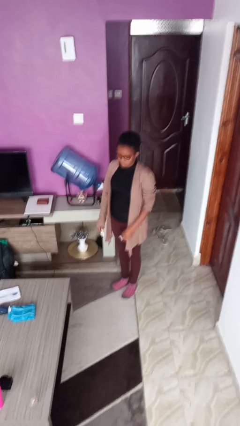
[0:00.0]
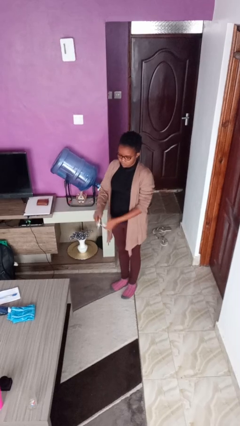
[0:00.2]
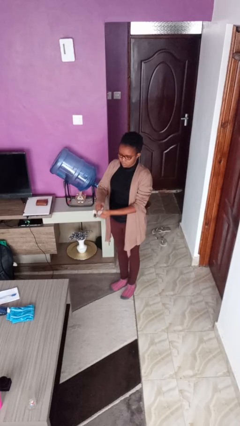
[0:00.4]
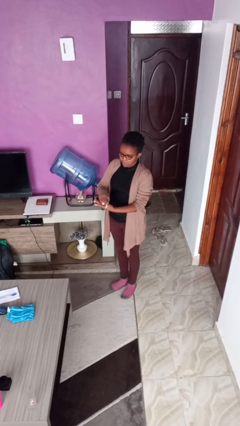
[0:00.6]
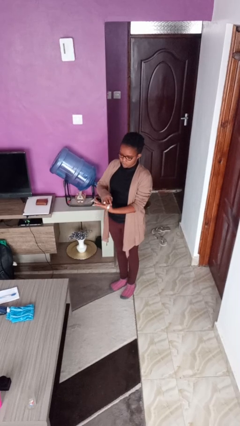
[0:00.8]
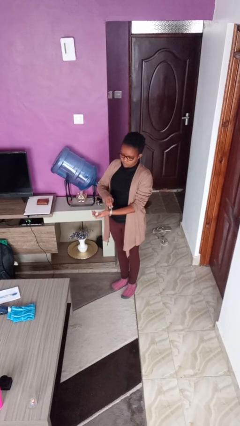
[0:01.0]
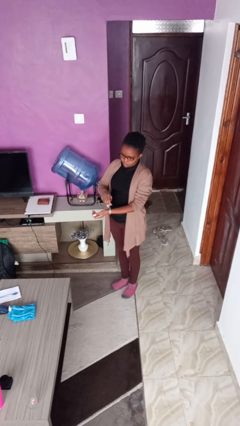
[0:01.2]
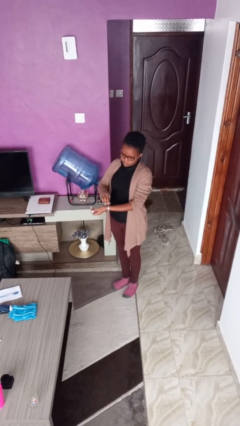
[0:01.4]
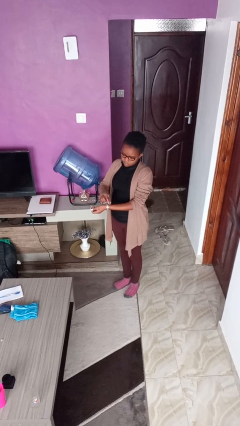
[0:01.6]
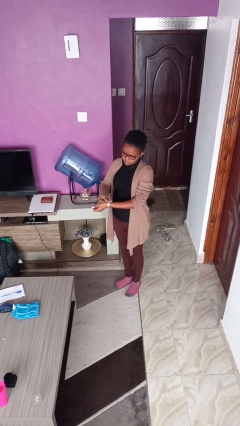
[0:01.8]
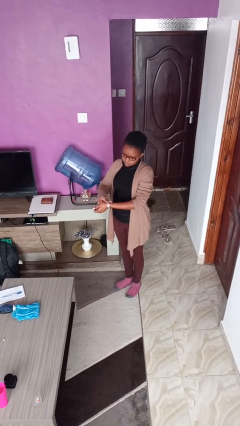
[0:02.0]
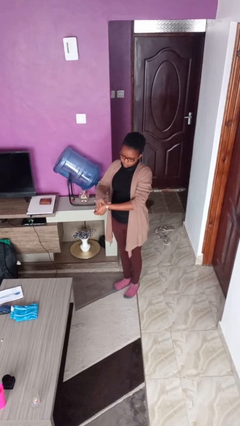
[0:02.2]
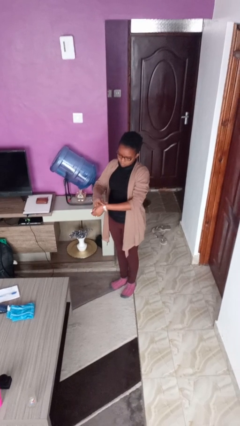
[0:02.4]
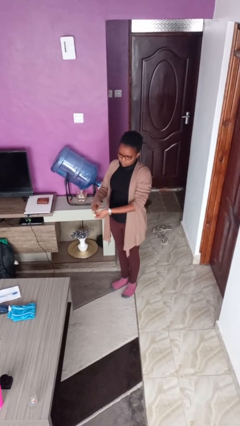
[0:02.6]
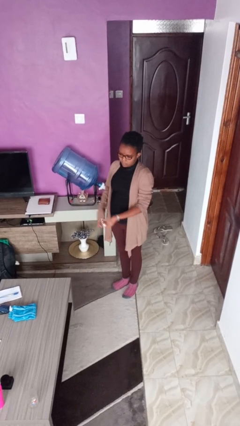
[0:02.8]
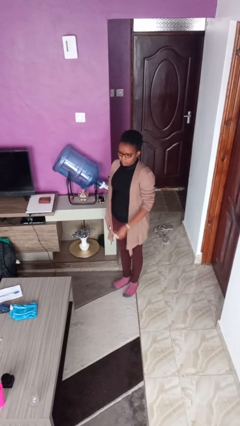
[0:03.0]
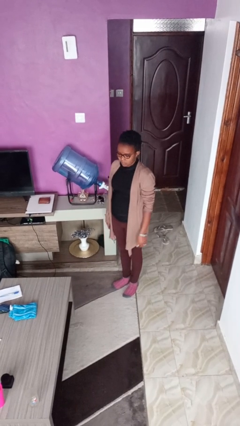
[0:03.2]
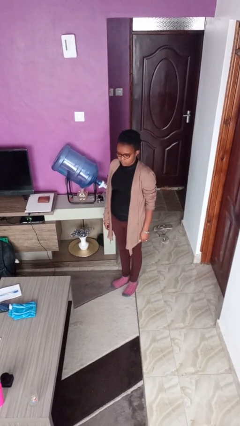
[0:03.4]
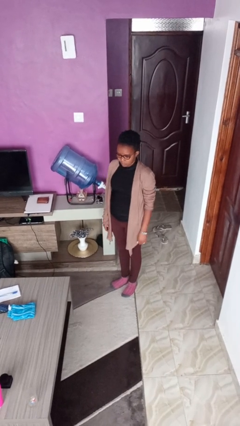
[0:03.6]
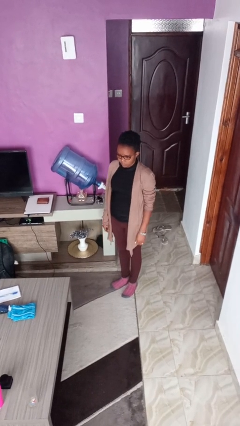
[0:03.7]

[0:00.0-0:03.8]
person puts on wristwatch

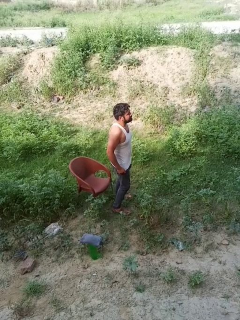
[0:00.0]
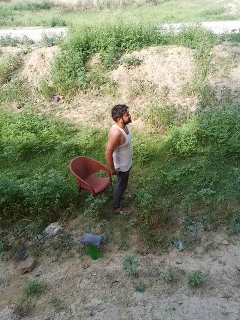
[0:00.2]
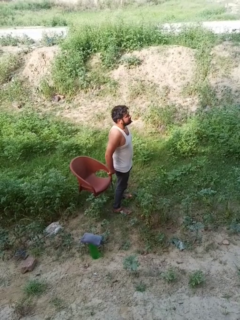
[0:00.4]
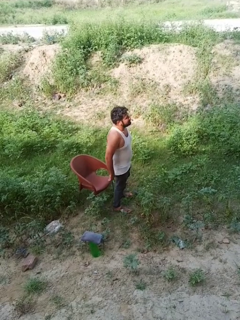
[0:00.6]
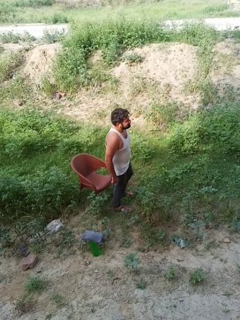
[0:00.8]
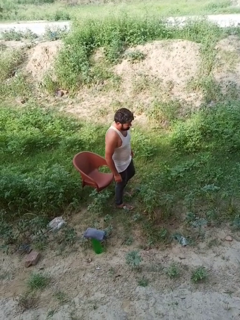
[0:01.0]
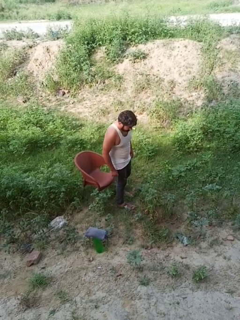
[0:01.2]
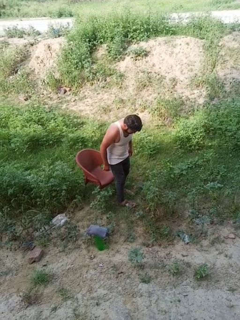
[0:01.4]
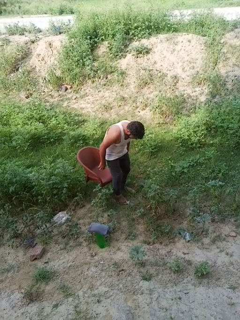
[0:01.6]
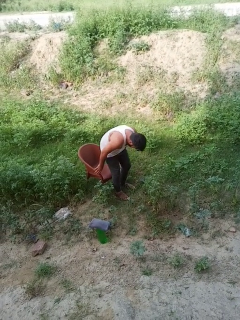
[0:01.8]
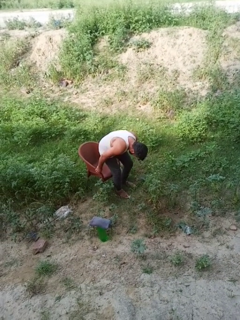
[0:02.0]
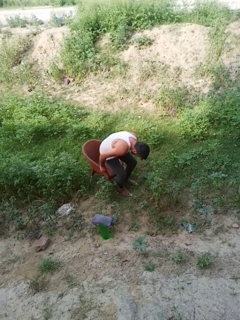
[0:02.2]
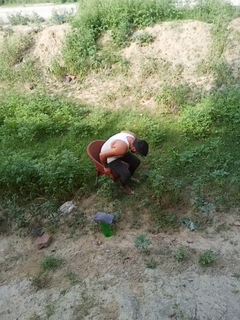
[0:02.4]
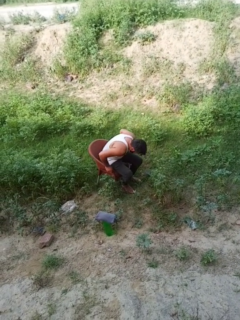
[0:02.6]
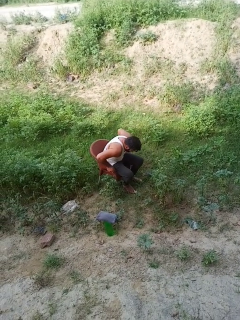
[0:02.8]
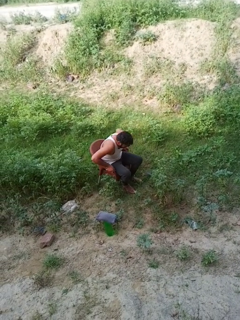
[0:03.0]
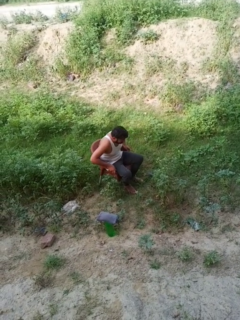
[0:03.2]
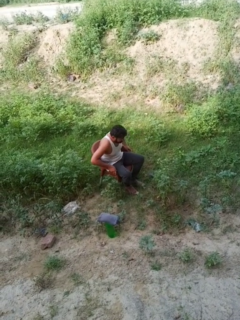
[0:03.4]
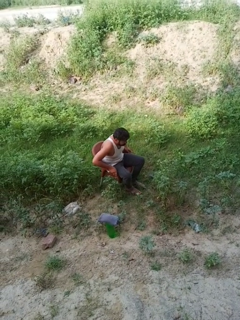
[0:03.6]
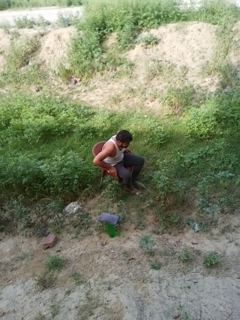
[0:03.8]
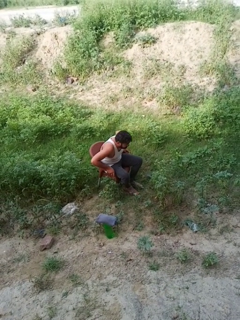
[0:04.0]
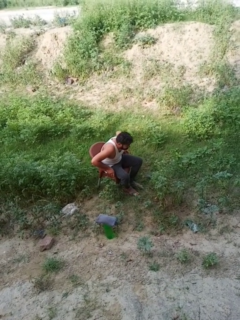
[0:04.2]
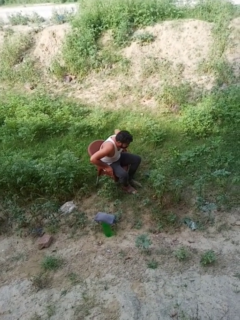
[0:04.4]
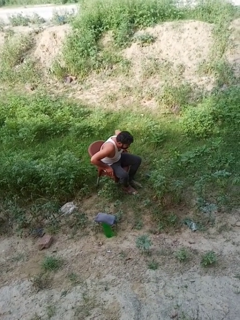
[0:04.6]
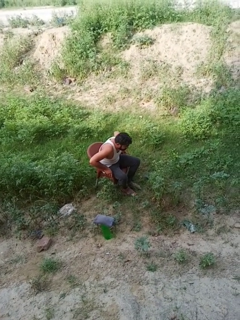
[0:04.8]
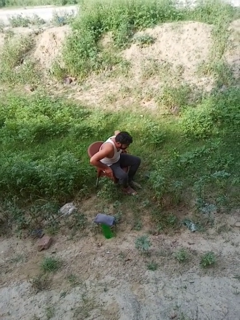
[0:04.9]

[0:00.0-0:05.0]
person sits down

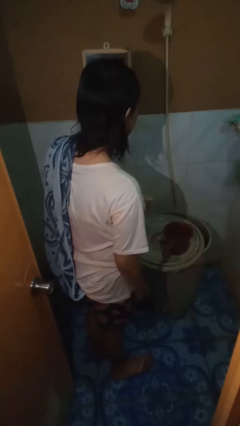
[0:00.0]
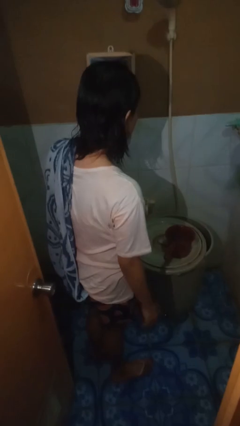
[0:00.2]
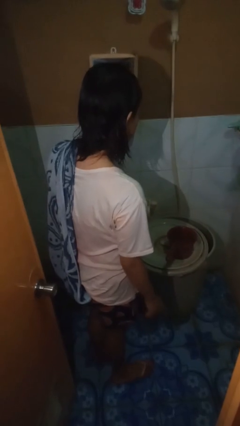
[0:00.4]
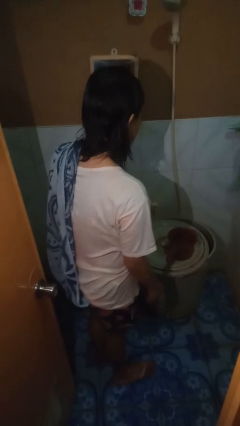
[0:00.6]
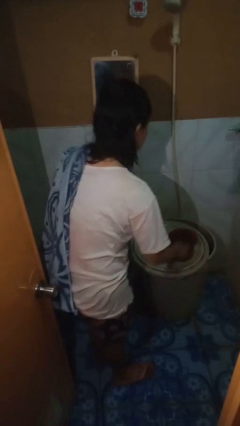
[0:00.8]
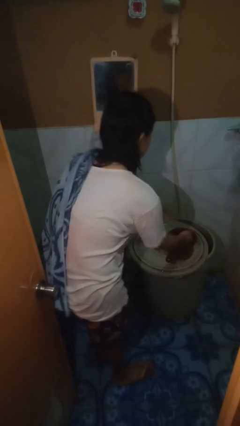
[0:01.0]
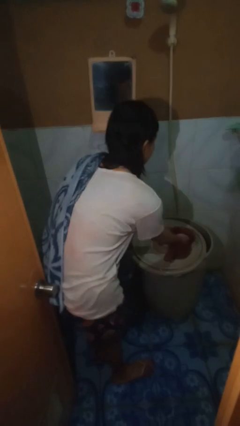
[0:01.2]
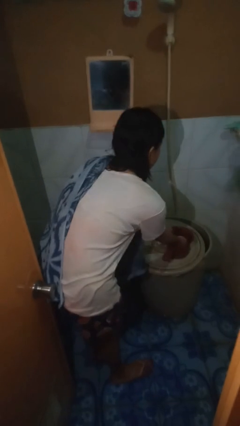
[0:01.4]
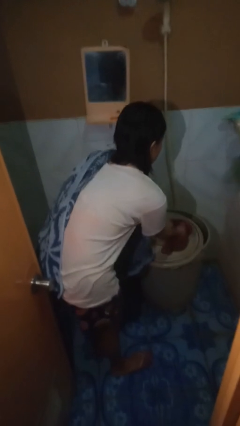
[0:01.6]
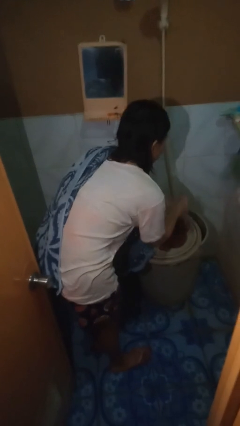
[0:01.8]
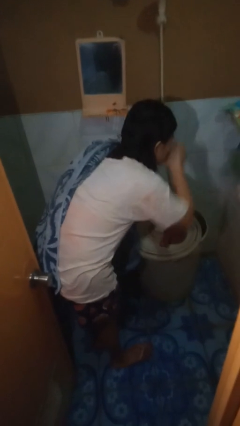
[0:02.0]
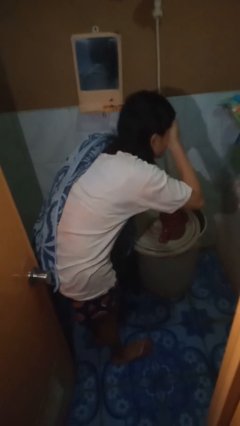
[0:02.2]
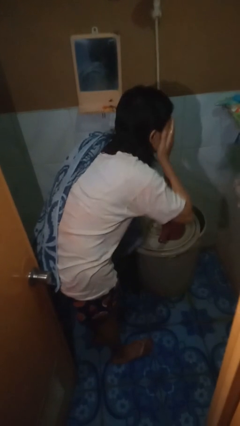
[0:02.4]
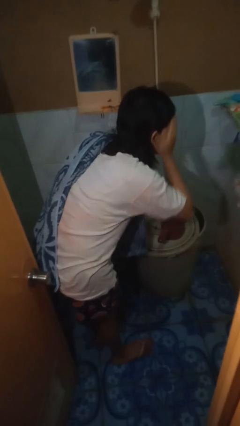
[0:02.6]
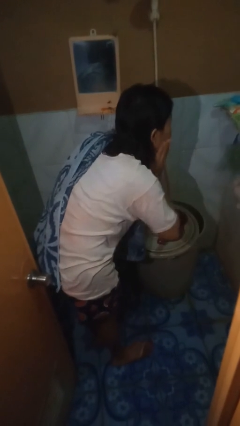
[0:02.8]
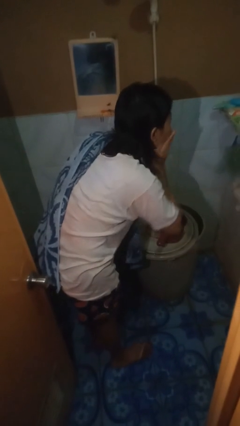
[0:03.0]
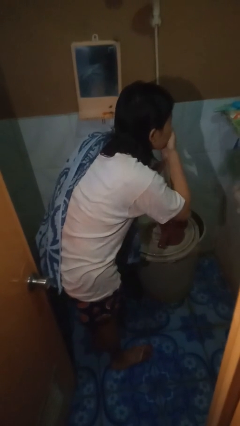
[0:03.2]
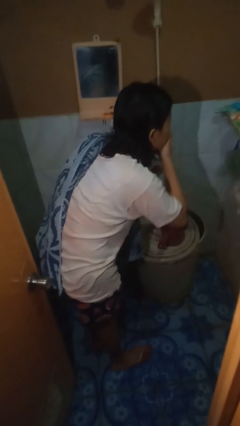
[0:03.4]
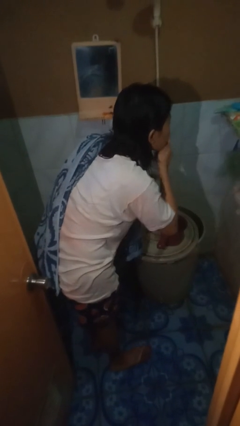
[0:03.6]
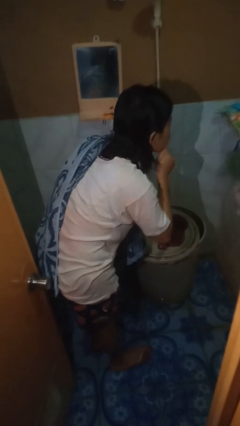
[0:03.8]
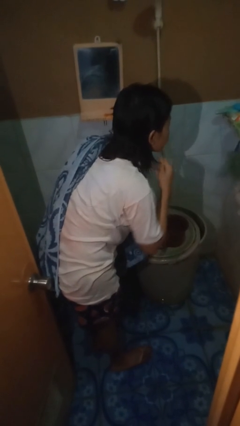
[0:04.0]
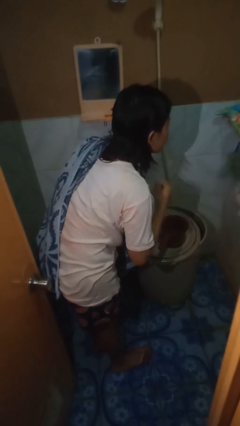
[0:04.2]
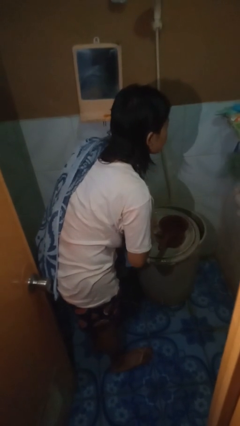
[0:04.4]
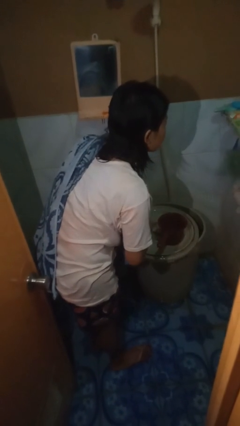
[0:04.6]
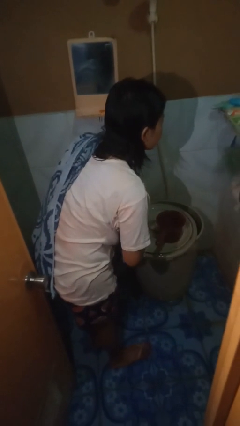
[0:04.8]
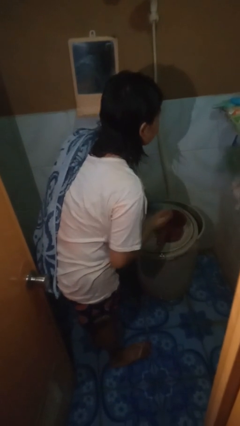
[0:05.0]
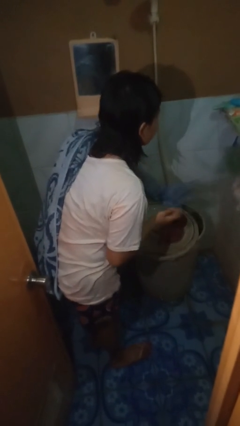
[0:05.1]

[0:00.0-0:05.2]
person washes face

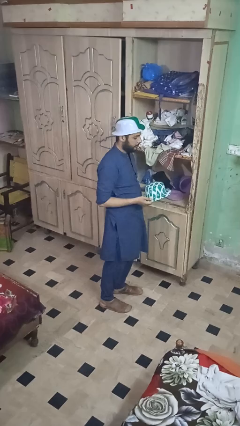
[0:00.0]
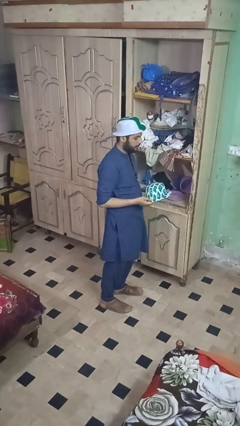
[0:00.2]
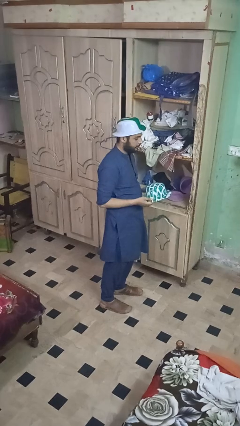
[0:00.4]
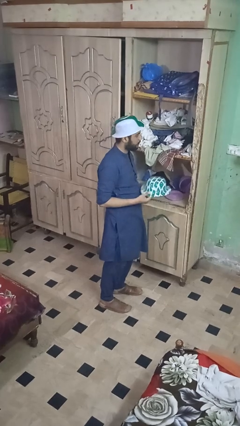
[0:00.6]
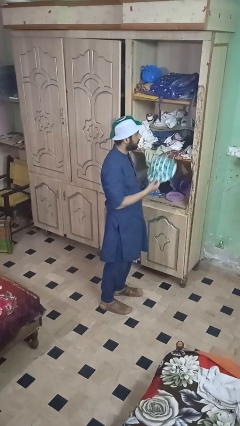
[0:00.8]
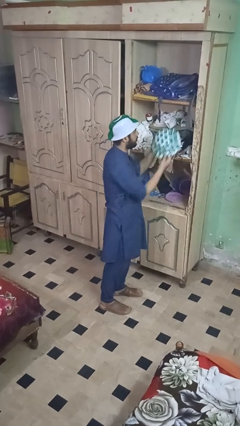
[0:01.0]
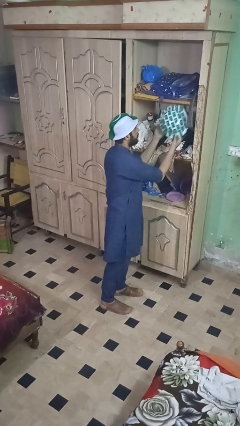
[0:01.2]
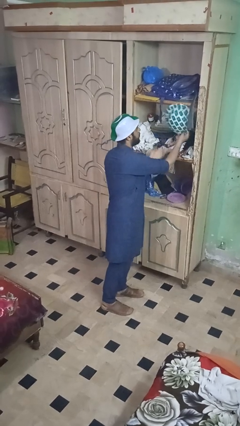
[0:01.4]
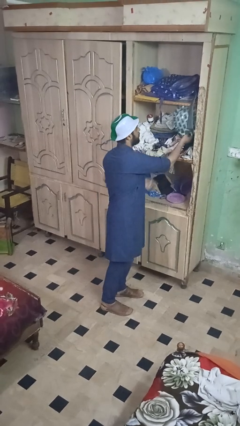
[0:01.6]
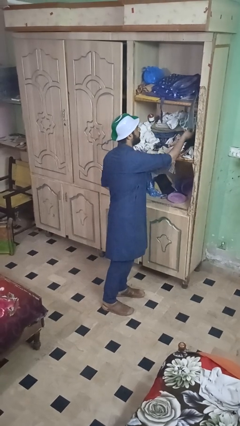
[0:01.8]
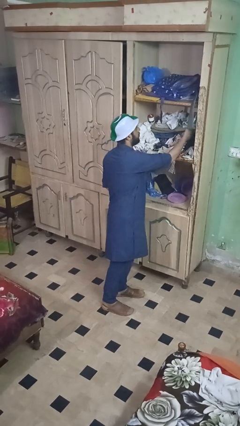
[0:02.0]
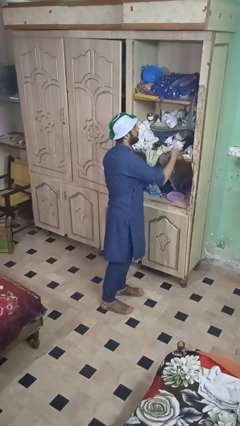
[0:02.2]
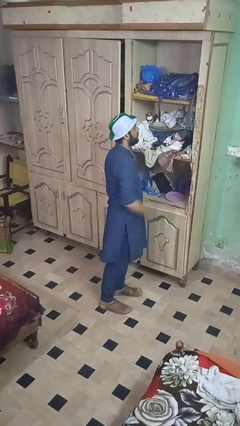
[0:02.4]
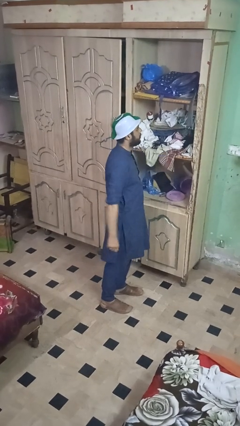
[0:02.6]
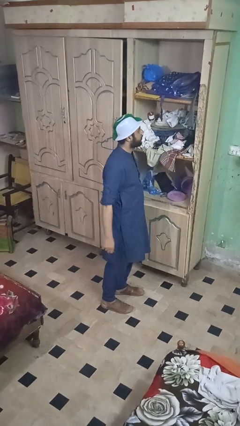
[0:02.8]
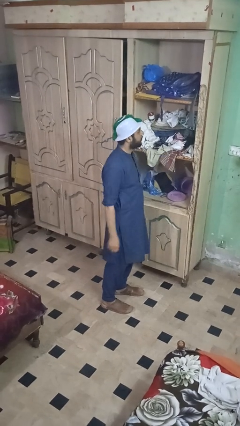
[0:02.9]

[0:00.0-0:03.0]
person puts down object on shelf

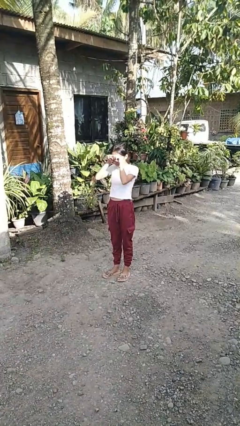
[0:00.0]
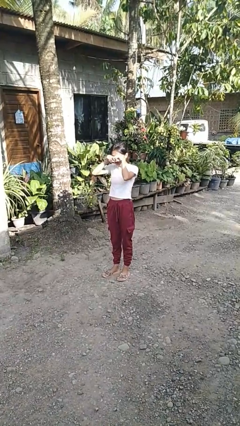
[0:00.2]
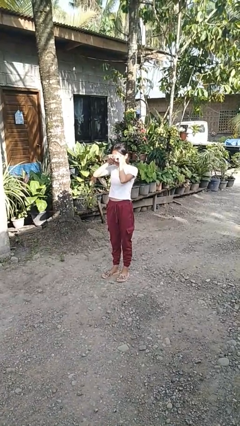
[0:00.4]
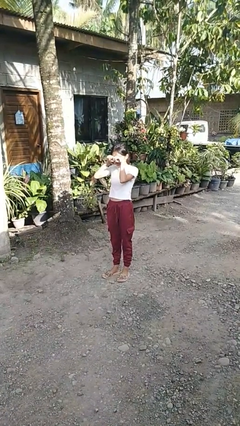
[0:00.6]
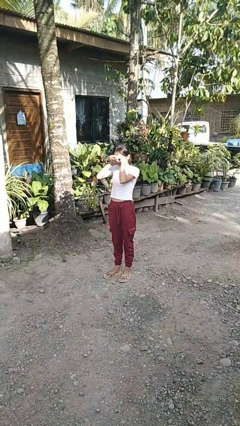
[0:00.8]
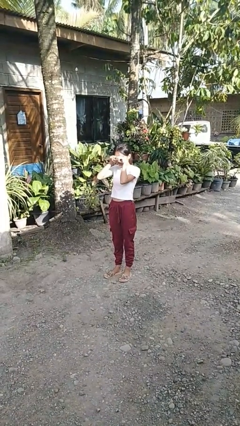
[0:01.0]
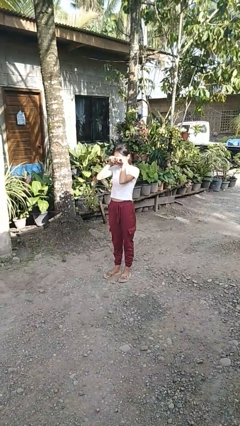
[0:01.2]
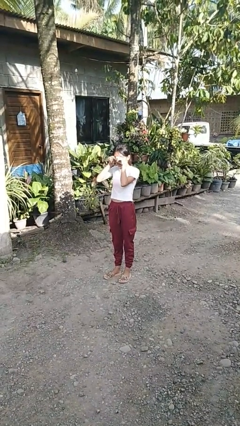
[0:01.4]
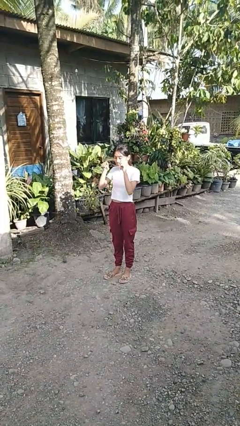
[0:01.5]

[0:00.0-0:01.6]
person rubs eyes
